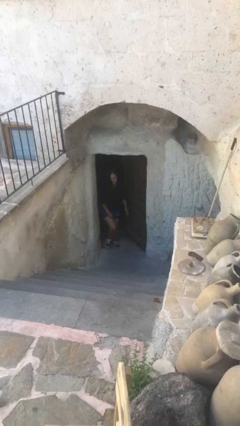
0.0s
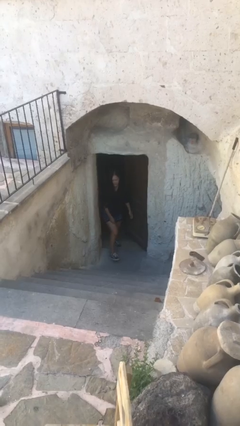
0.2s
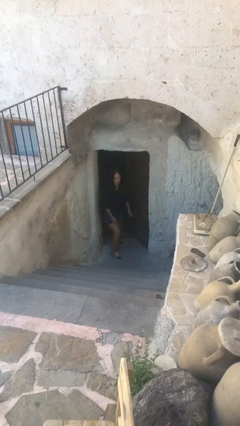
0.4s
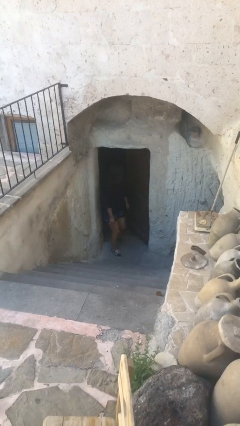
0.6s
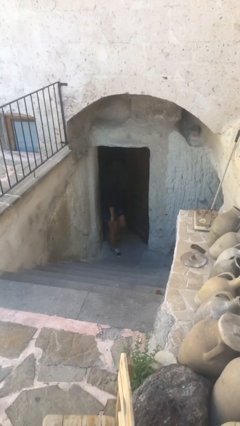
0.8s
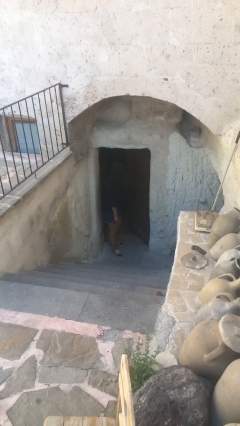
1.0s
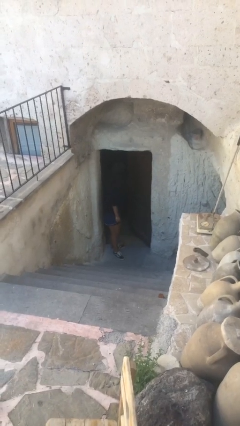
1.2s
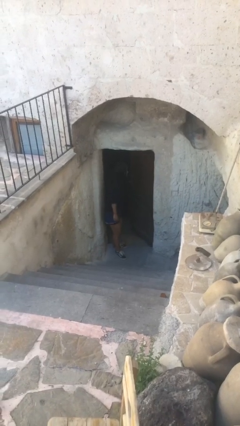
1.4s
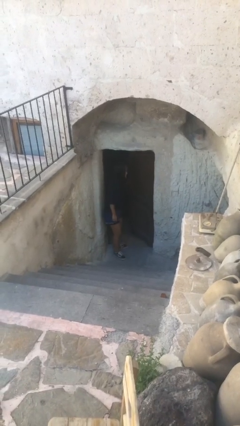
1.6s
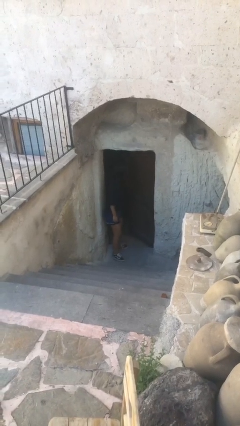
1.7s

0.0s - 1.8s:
person enters scene through structure

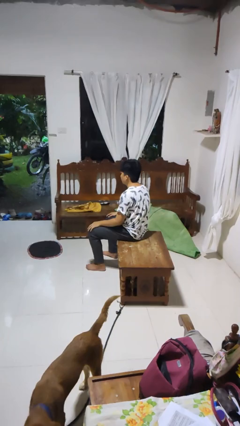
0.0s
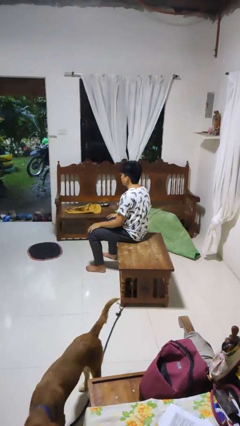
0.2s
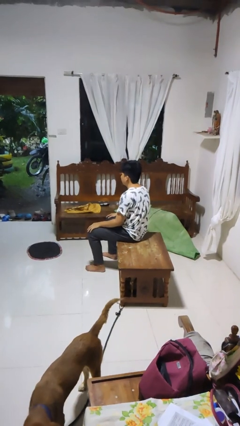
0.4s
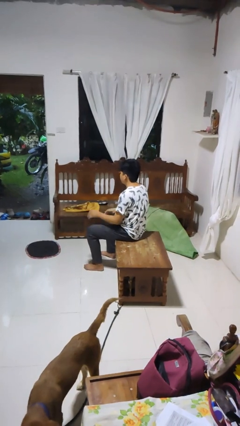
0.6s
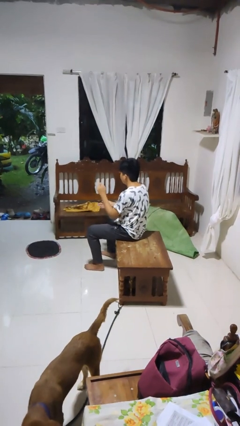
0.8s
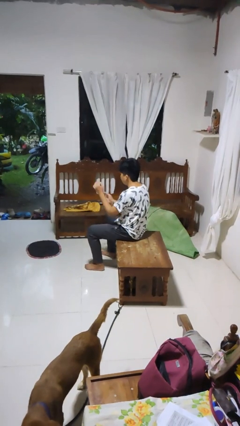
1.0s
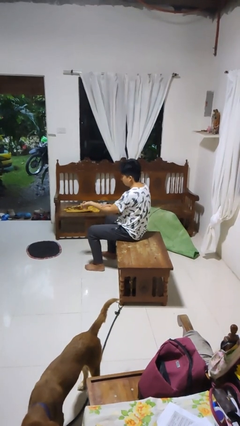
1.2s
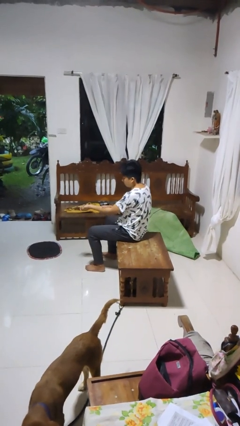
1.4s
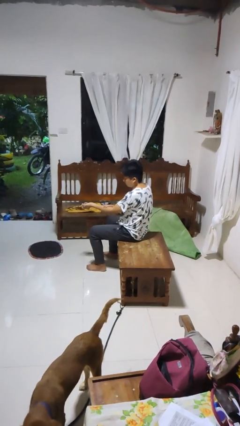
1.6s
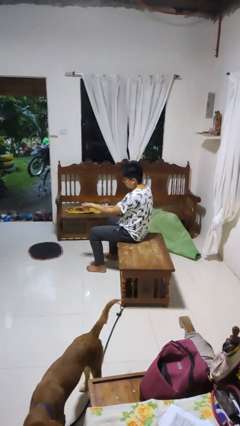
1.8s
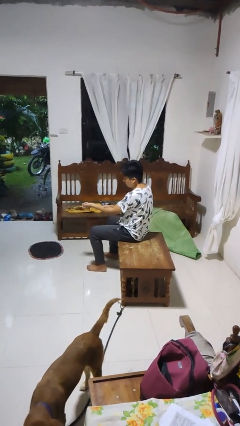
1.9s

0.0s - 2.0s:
person swats bug

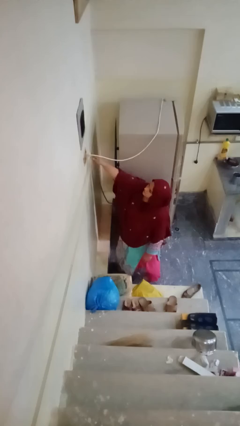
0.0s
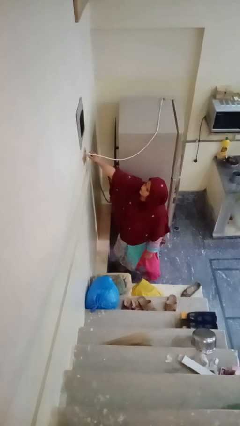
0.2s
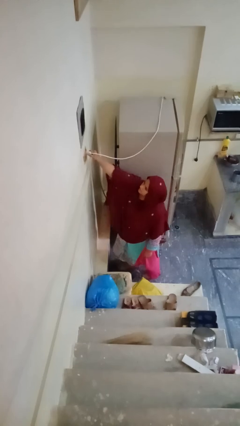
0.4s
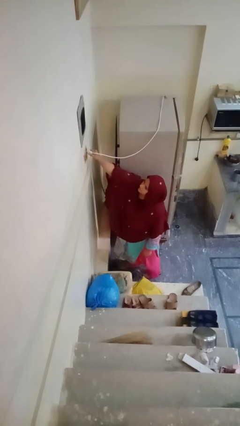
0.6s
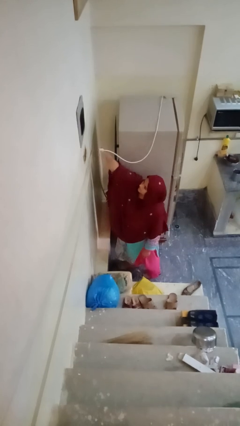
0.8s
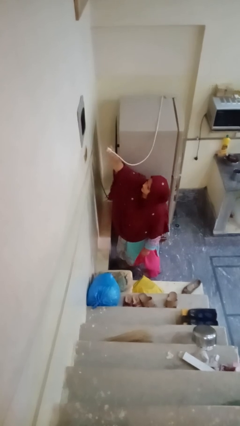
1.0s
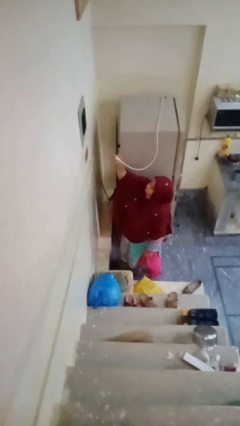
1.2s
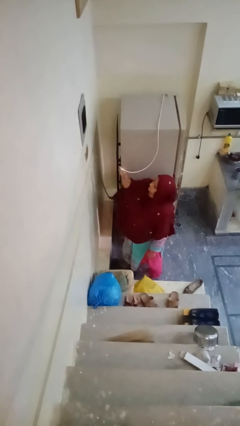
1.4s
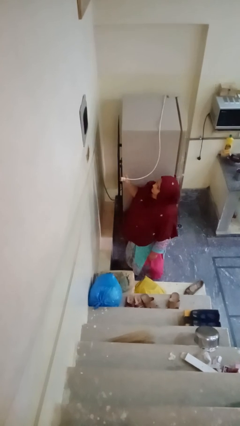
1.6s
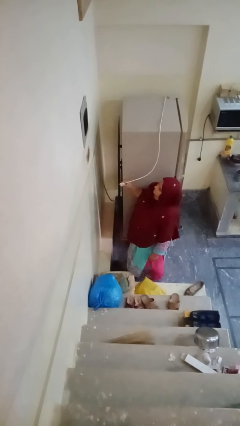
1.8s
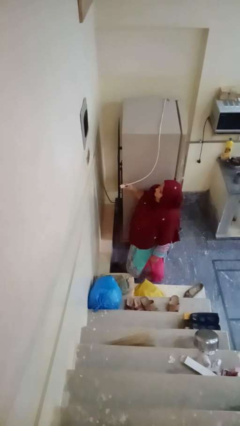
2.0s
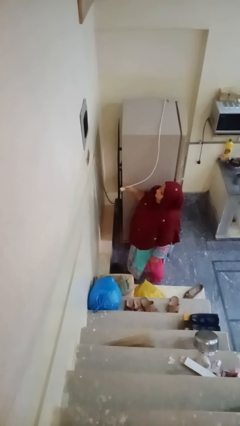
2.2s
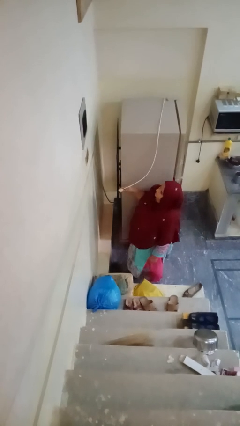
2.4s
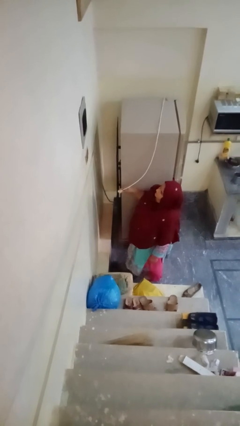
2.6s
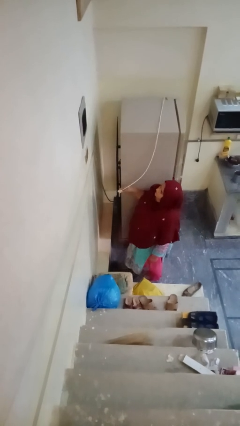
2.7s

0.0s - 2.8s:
person unplugs from electrical socket

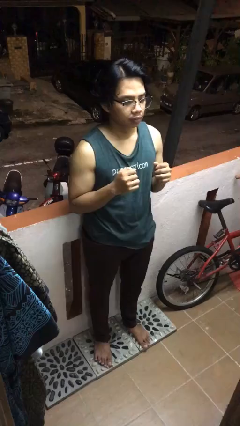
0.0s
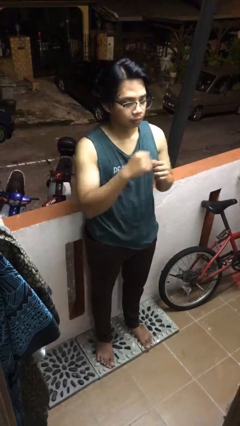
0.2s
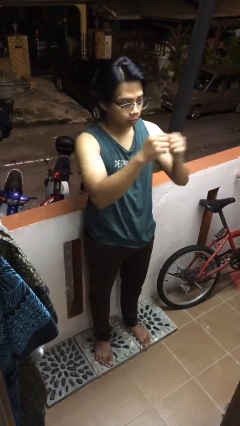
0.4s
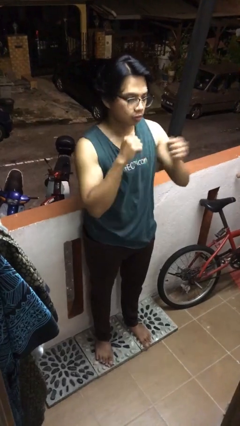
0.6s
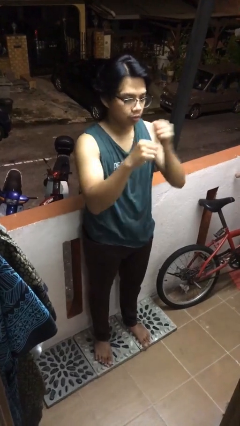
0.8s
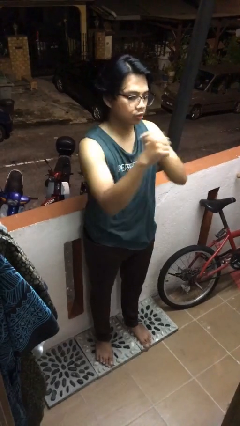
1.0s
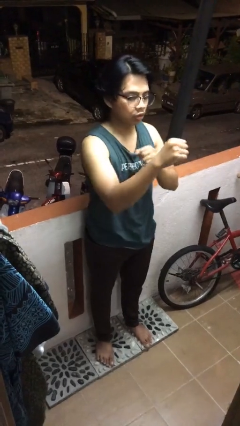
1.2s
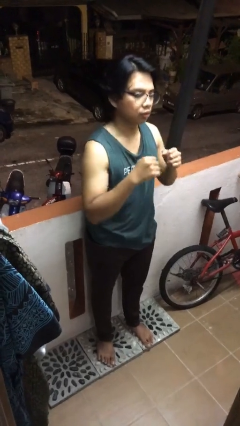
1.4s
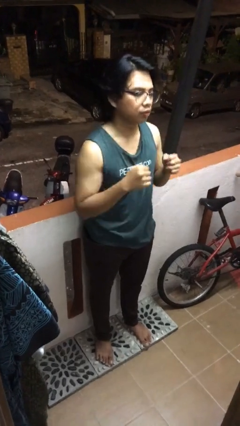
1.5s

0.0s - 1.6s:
person punches

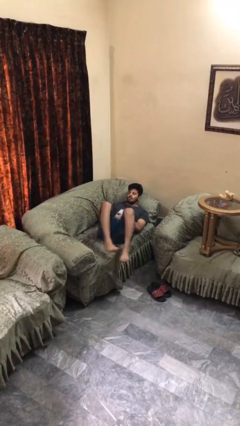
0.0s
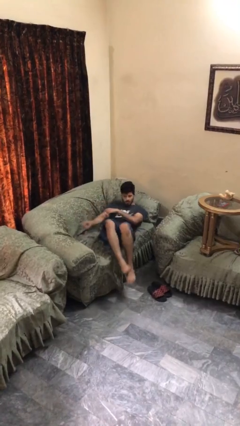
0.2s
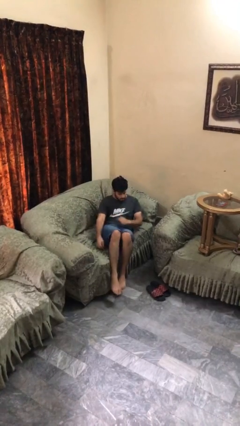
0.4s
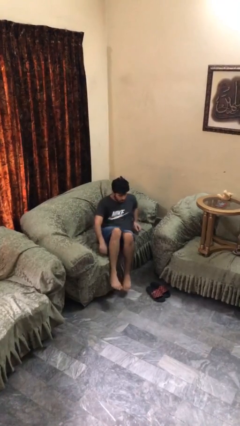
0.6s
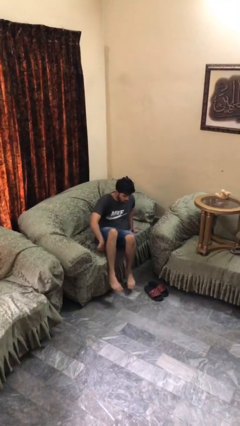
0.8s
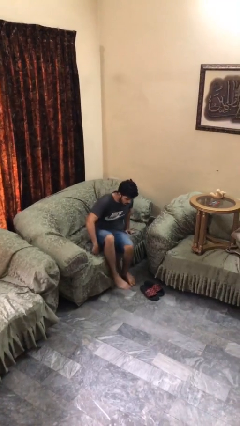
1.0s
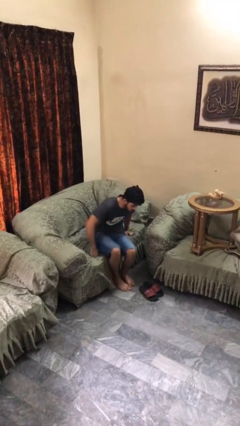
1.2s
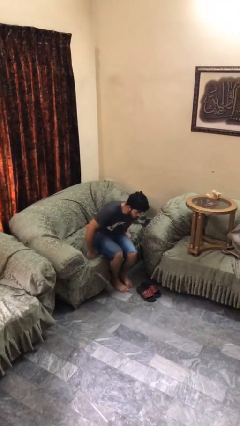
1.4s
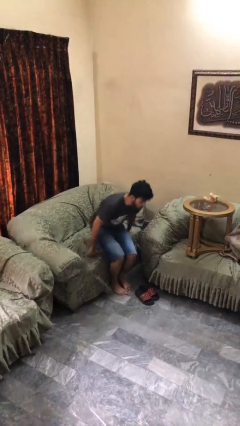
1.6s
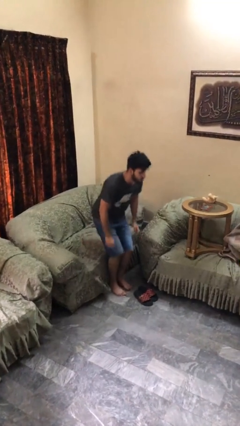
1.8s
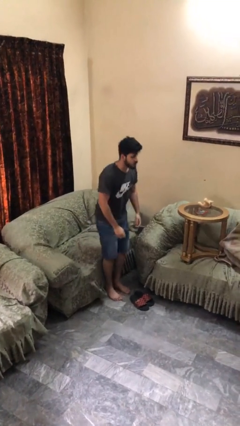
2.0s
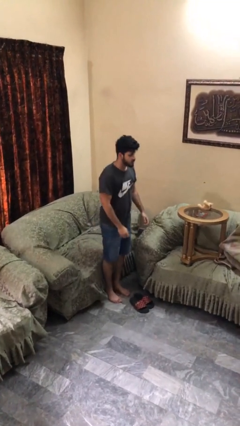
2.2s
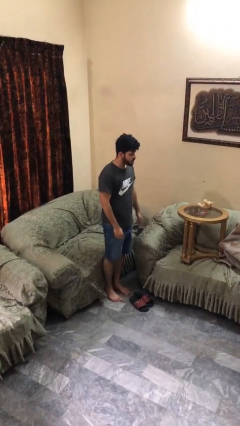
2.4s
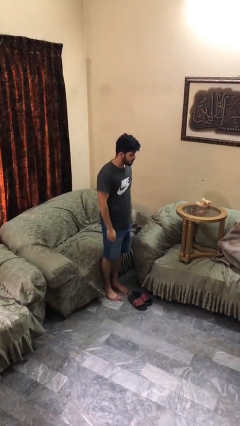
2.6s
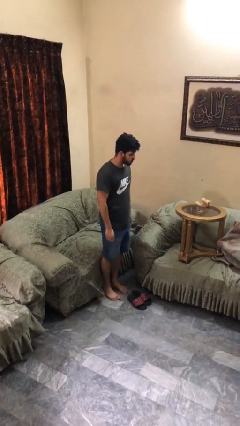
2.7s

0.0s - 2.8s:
person stands up

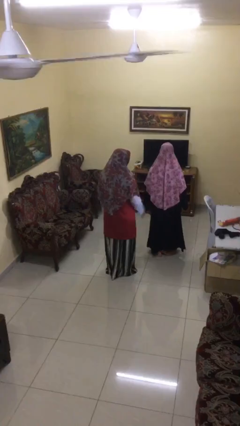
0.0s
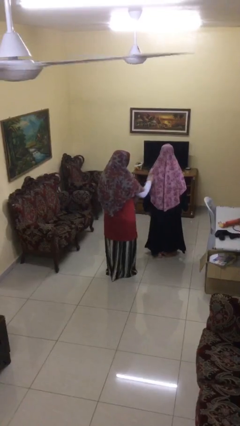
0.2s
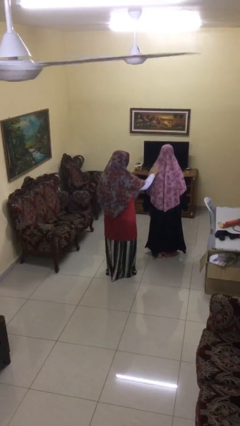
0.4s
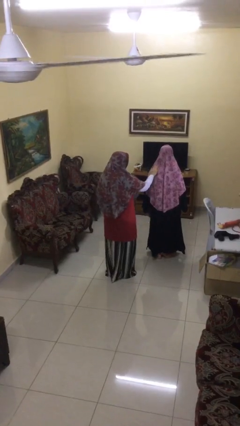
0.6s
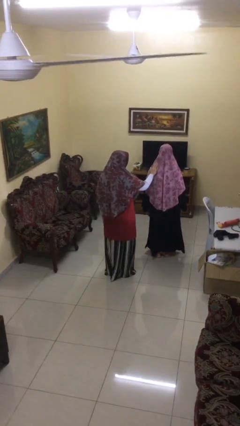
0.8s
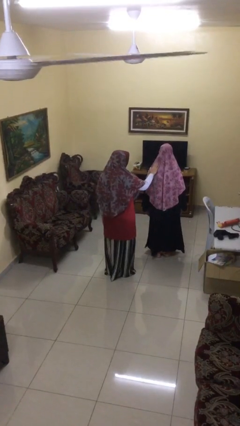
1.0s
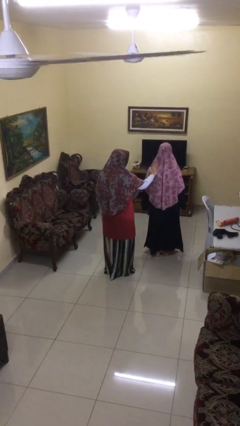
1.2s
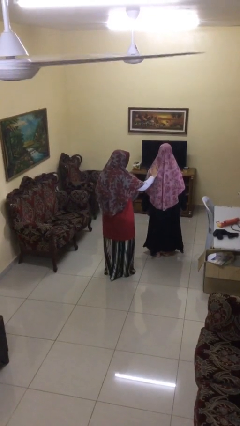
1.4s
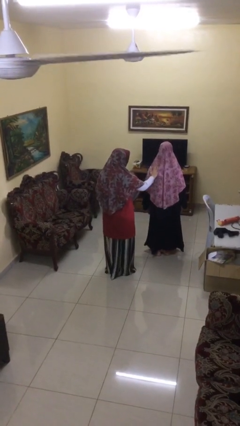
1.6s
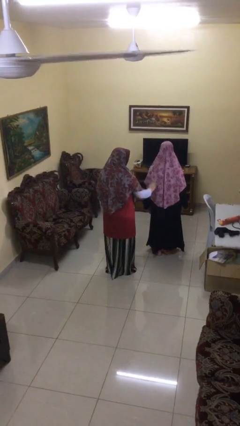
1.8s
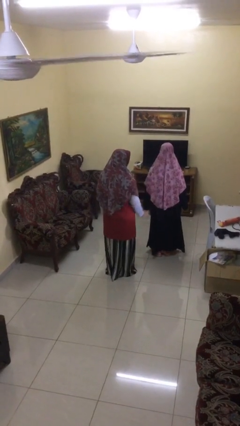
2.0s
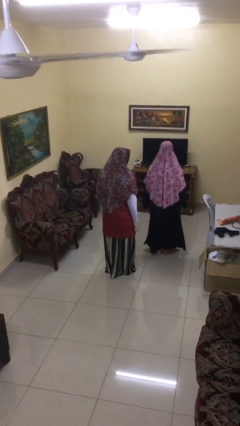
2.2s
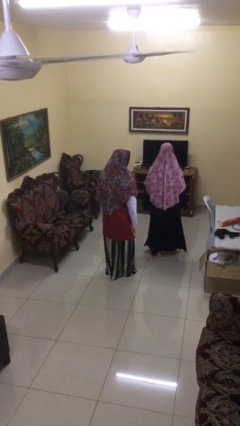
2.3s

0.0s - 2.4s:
person touches back of person

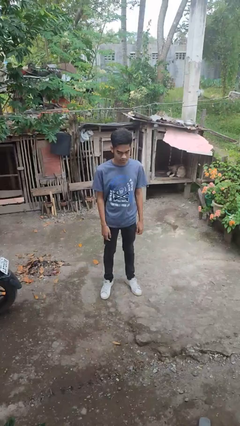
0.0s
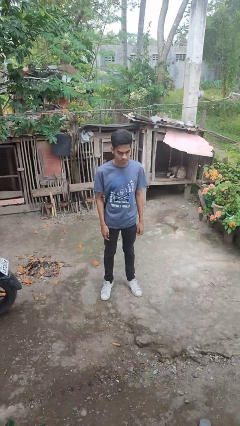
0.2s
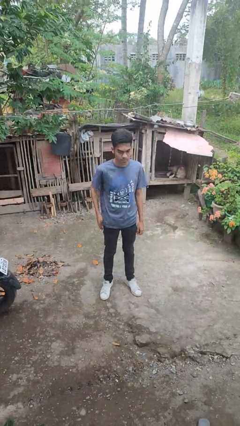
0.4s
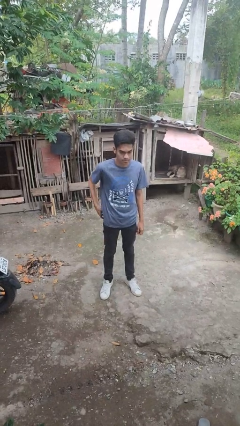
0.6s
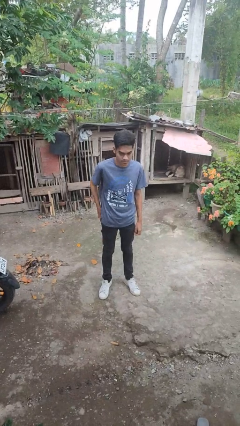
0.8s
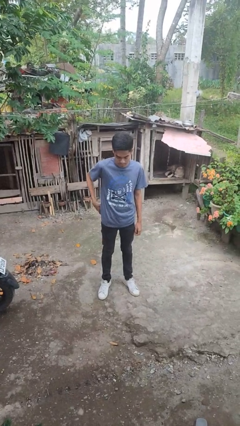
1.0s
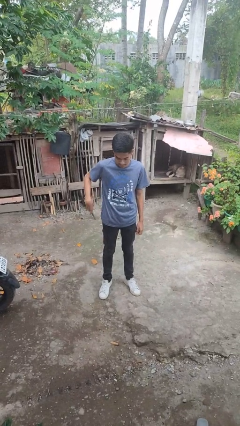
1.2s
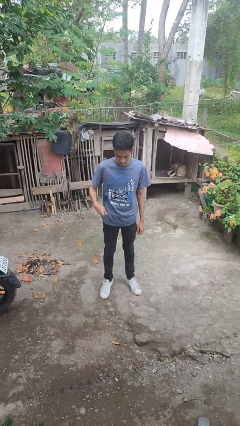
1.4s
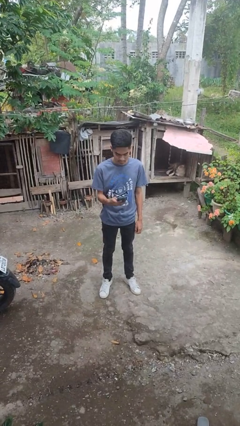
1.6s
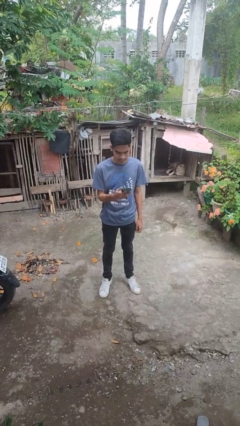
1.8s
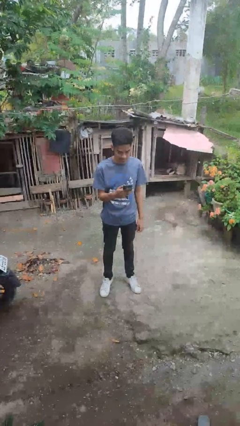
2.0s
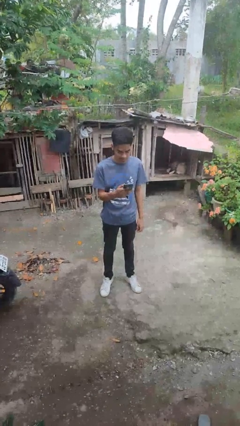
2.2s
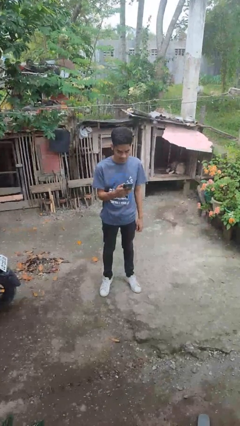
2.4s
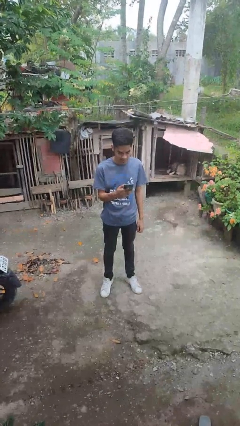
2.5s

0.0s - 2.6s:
person takes phone from pocket

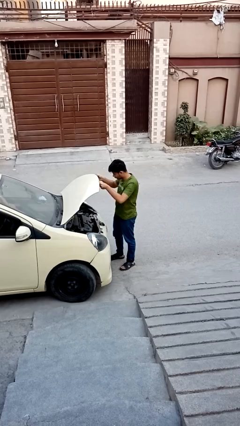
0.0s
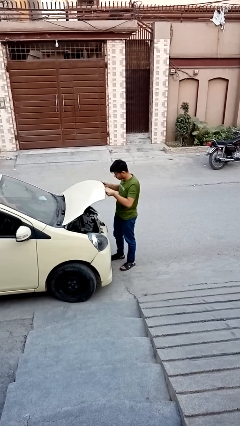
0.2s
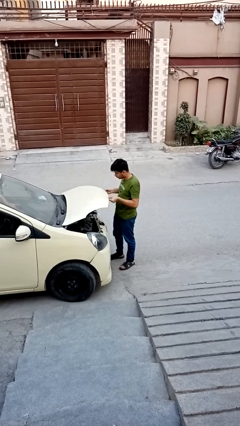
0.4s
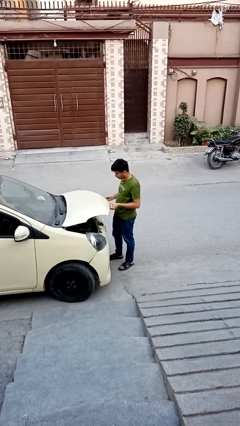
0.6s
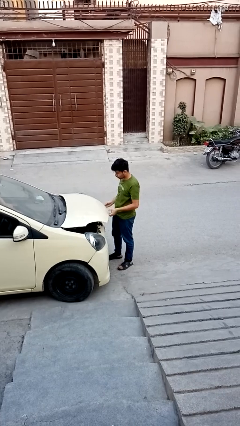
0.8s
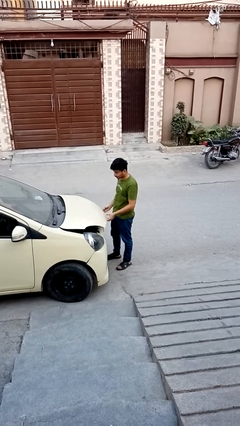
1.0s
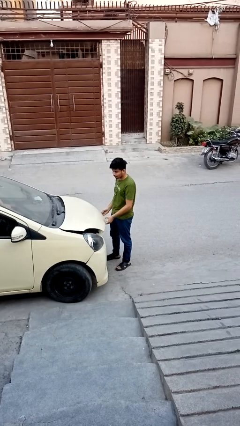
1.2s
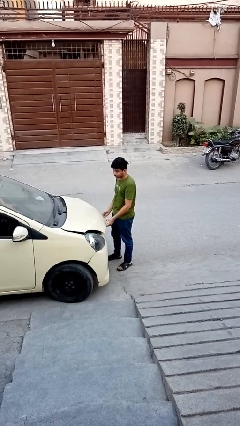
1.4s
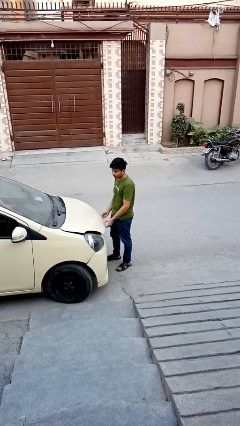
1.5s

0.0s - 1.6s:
person closes car hood
